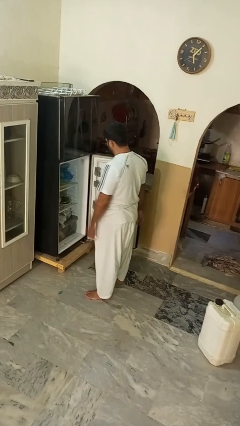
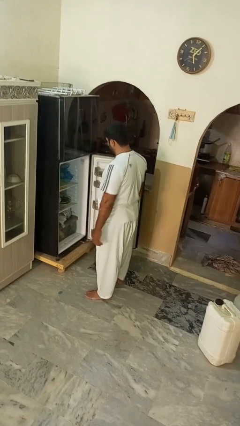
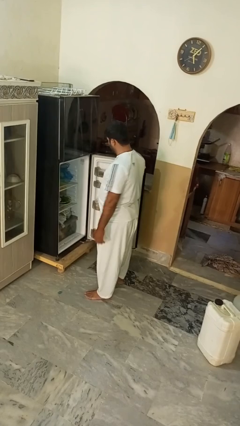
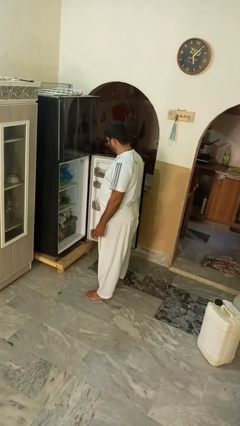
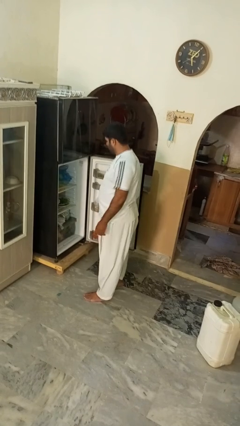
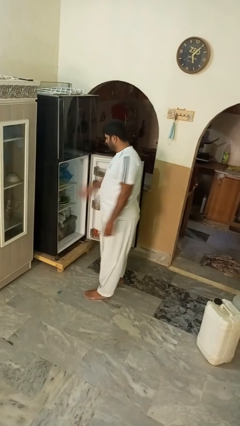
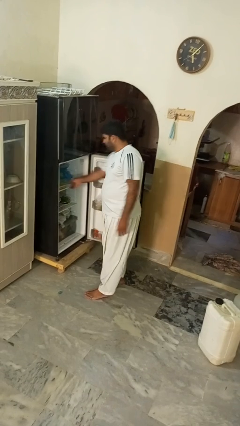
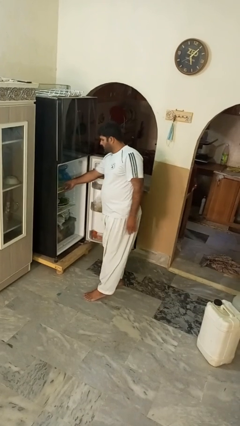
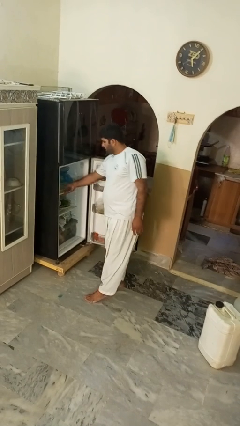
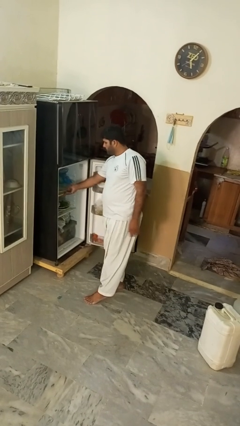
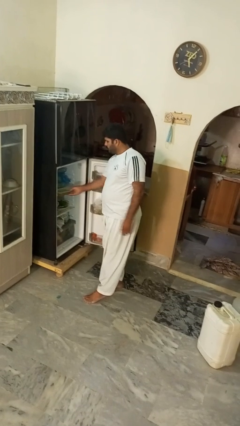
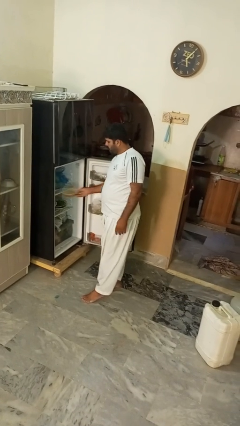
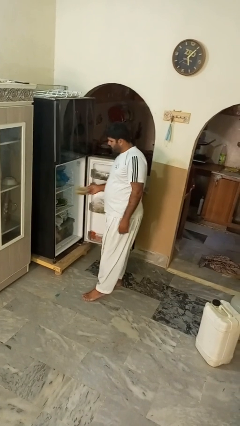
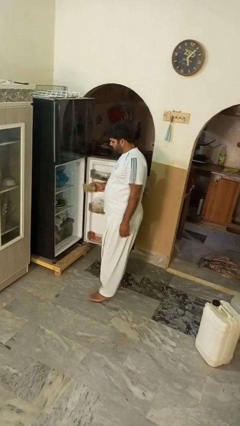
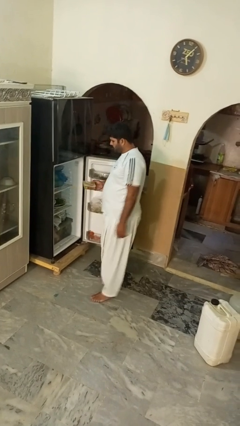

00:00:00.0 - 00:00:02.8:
person takes object from refrigerator

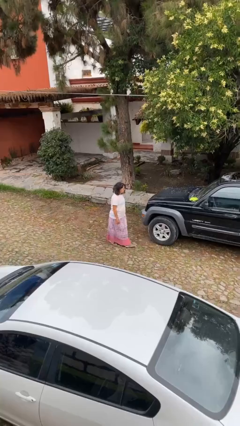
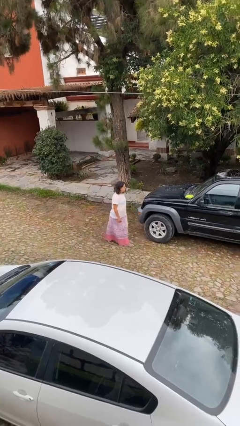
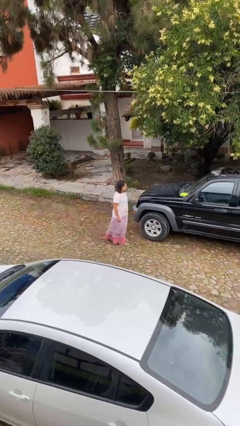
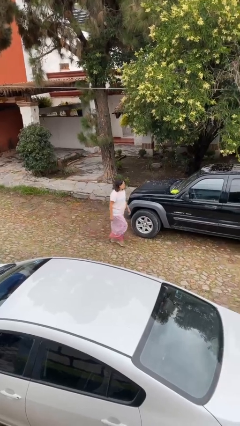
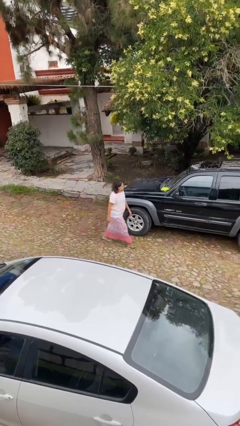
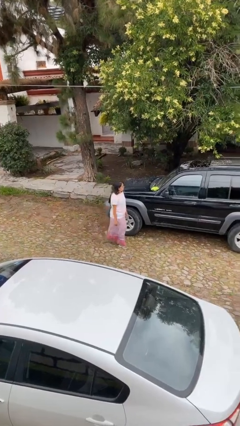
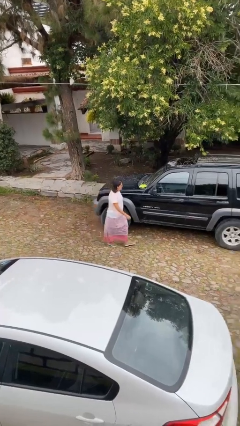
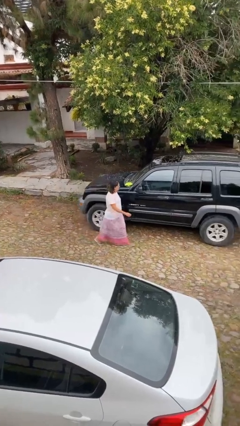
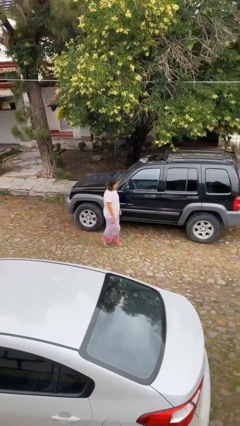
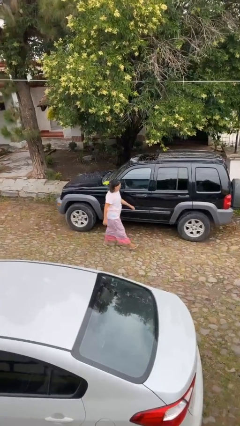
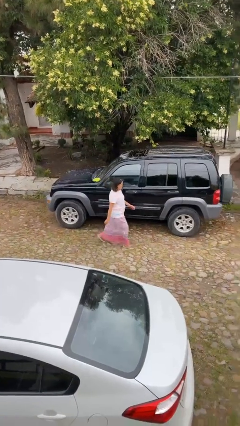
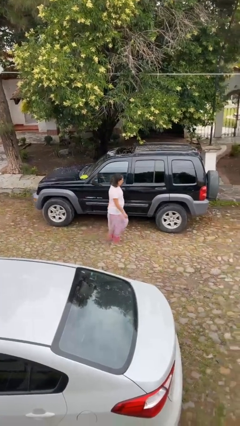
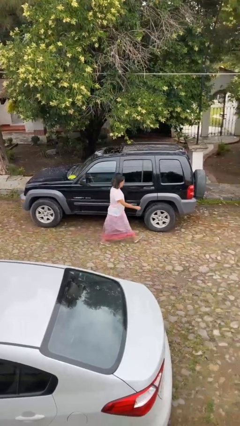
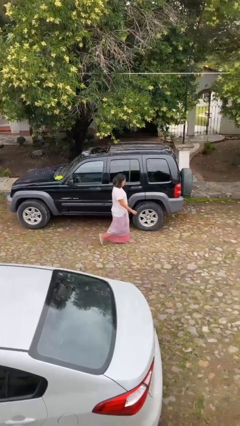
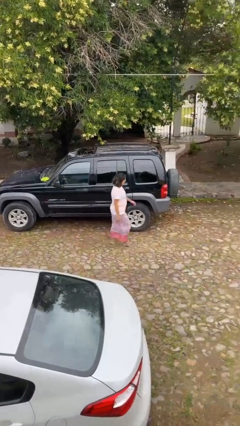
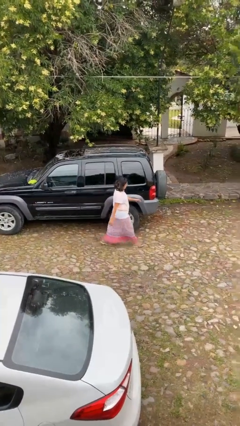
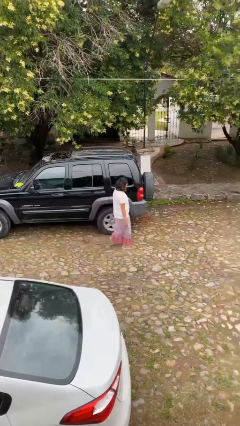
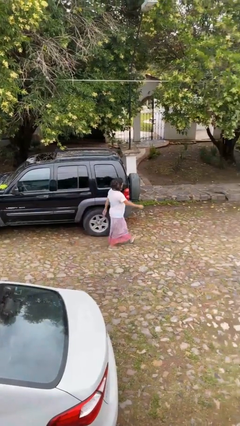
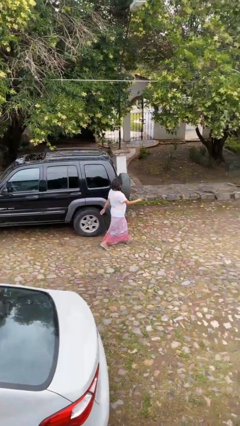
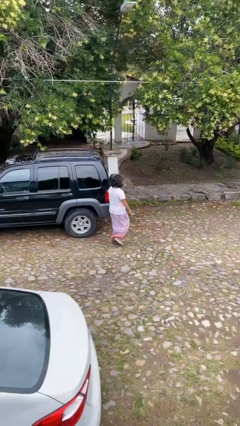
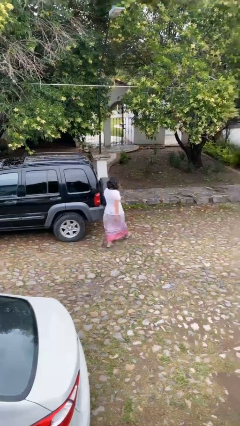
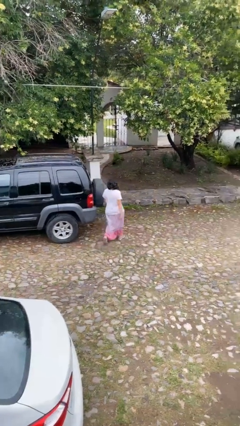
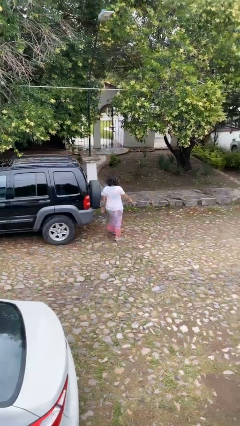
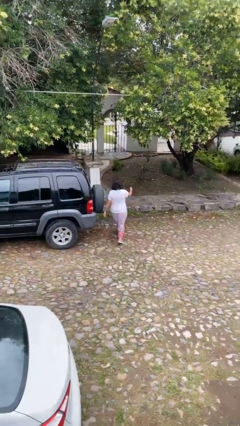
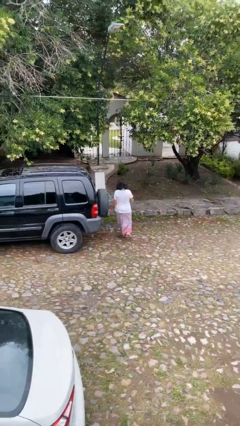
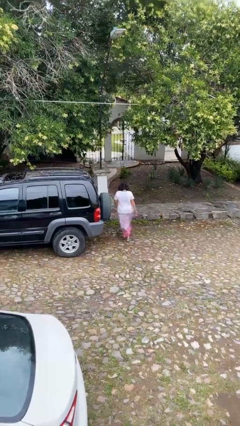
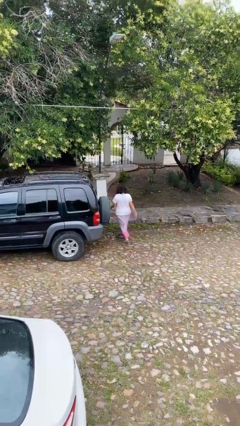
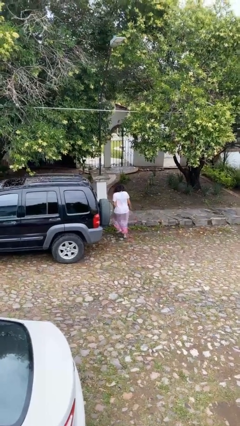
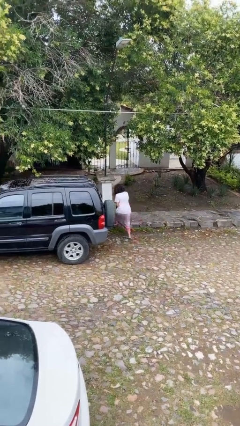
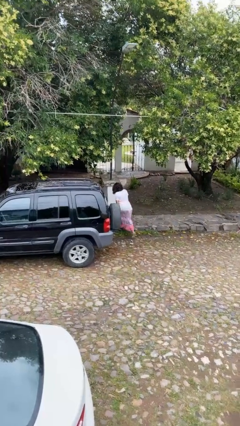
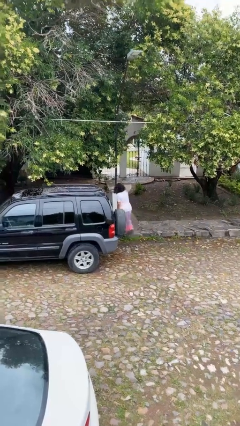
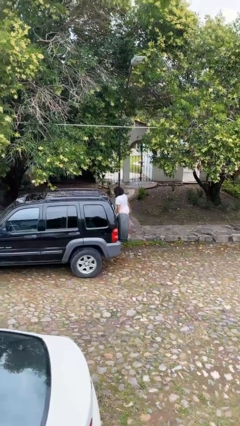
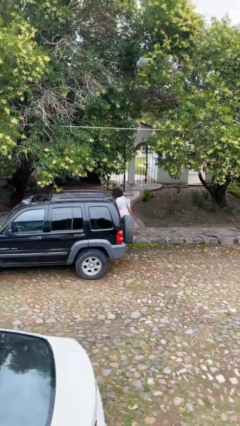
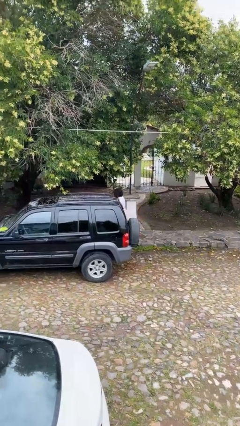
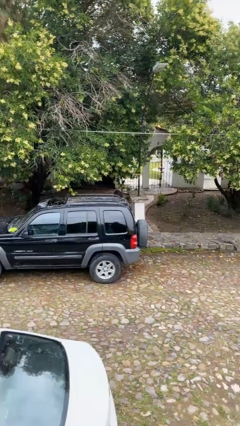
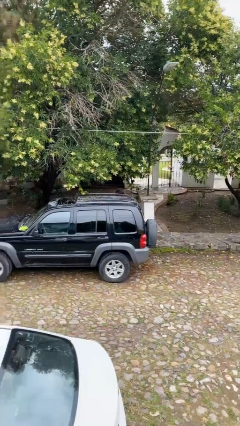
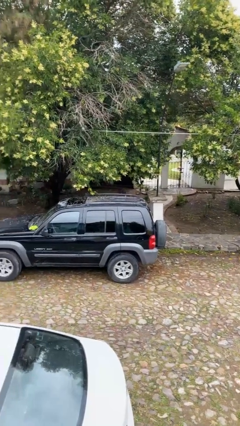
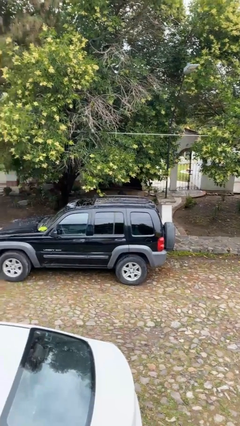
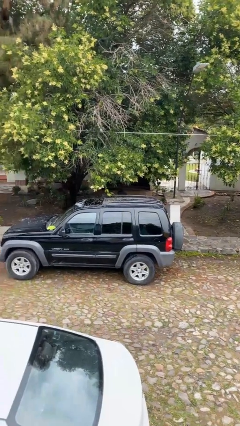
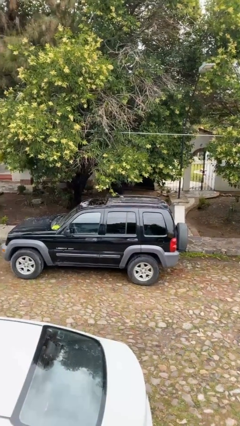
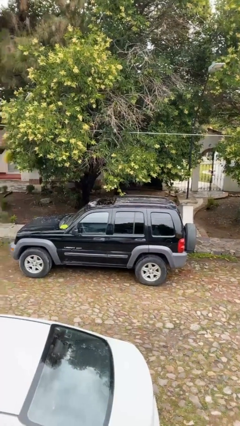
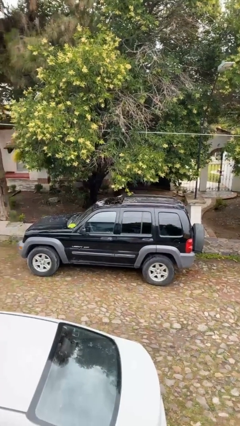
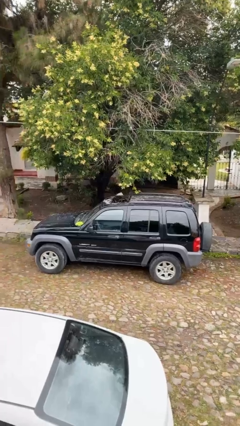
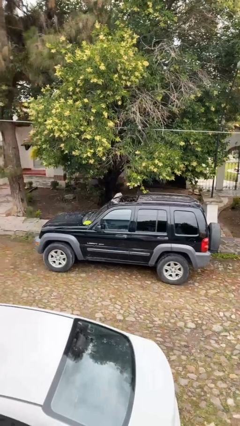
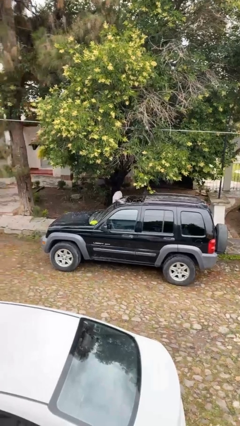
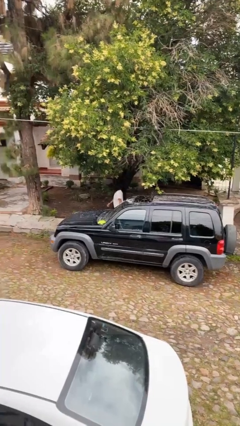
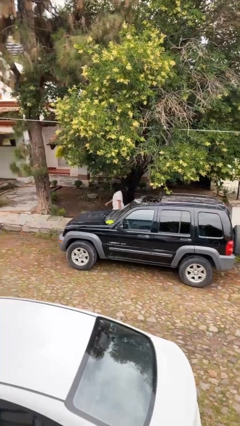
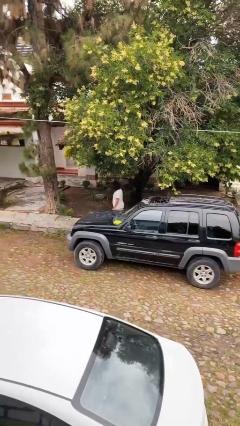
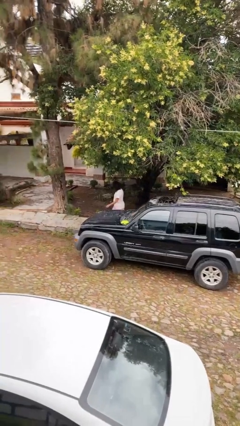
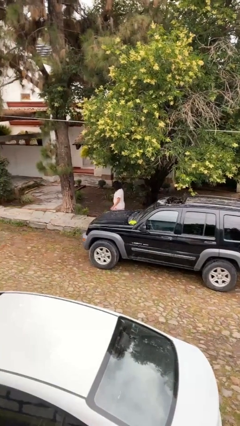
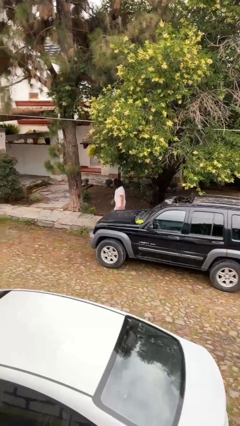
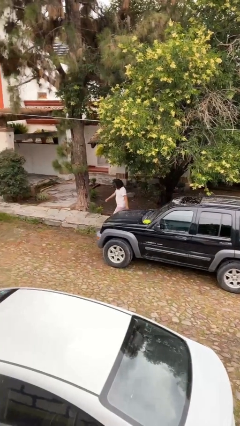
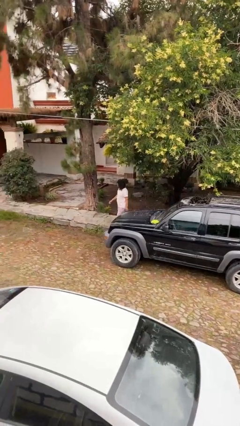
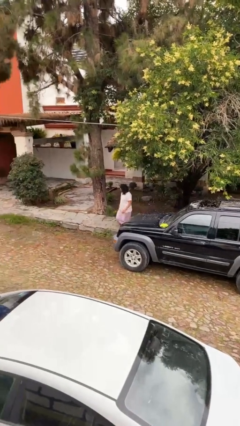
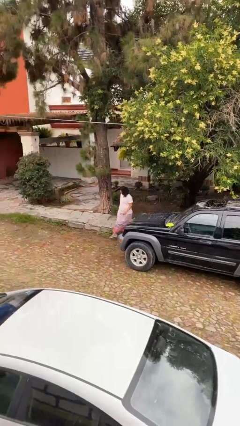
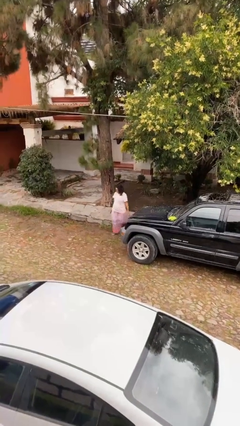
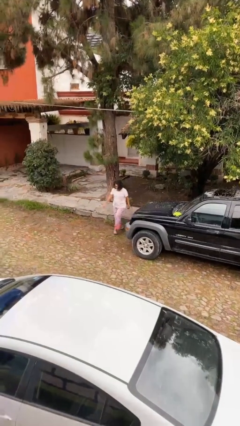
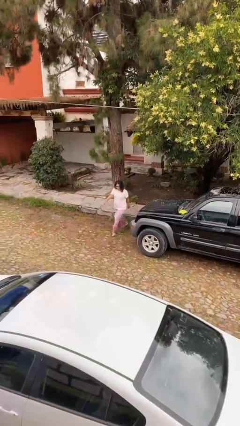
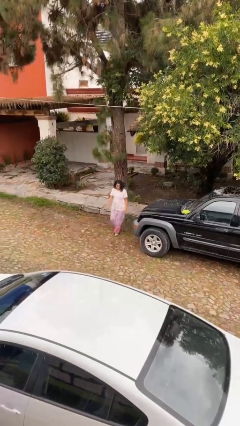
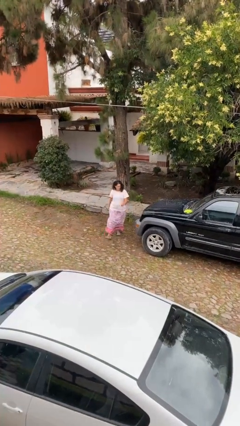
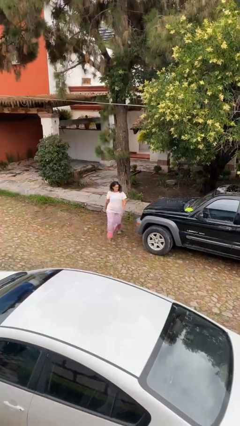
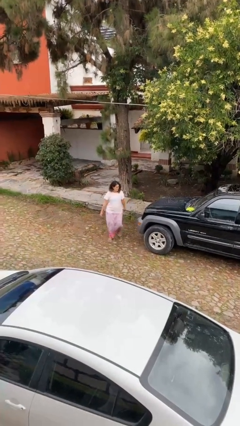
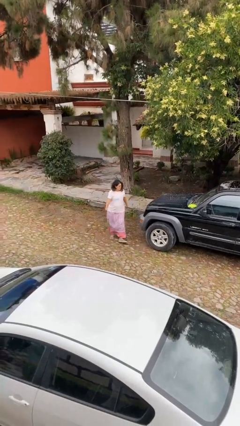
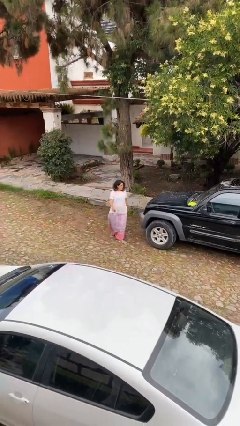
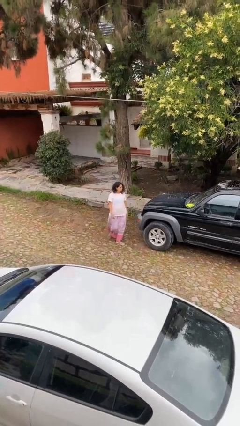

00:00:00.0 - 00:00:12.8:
person walks around car

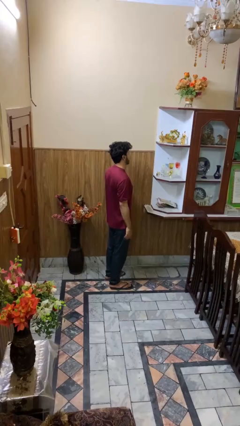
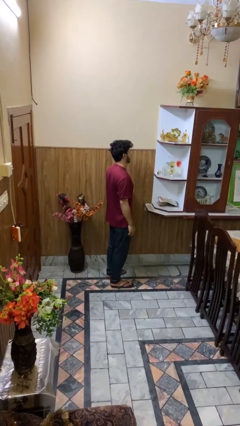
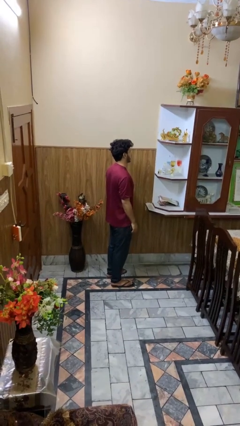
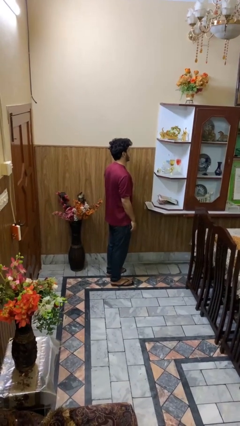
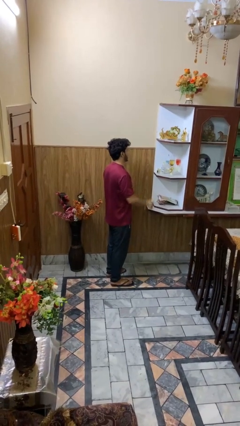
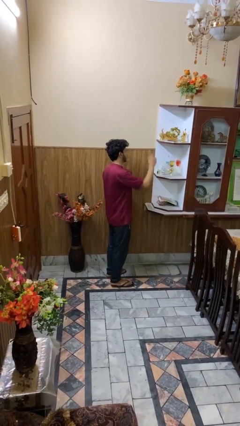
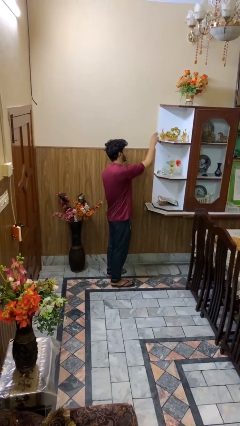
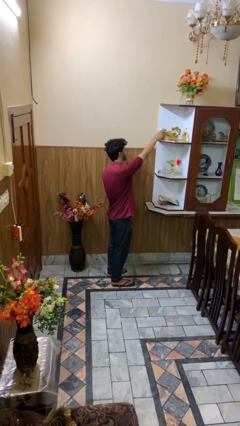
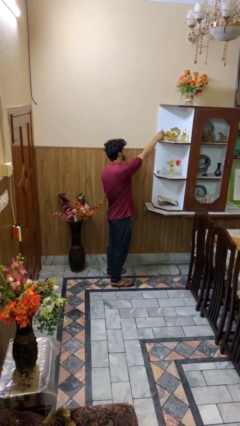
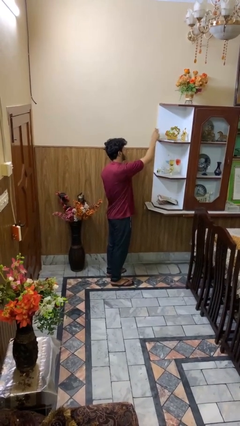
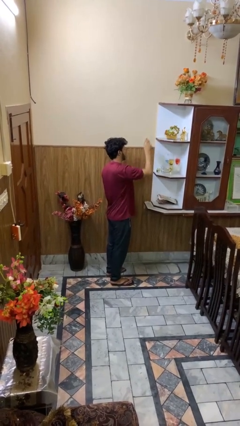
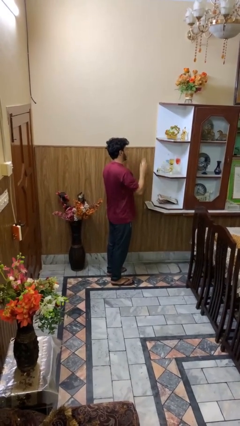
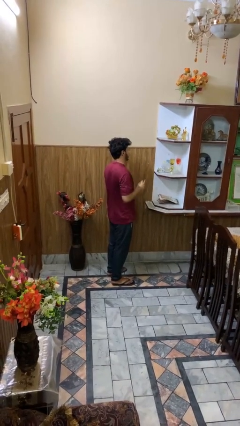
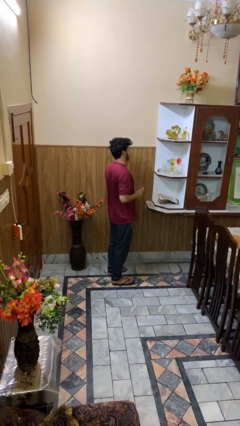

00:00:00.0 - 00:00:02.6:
person picks up object from shelf
